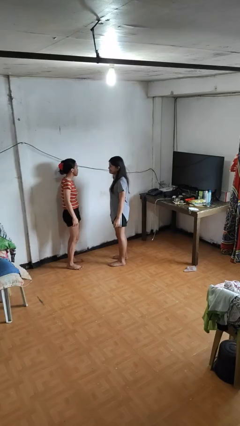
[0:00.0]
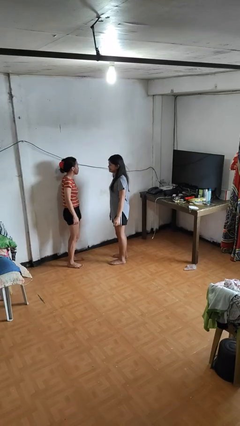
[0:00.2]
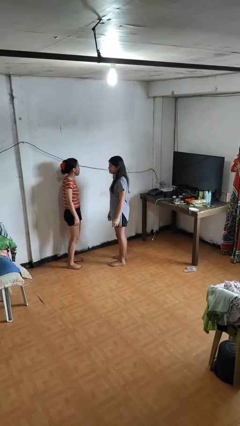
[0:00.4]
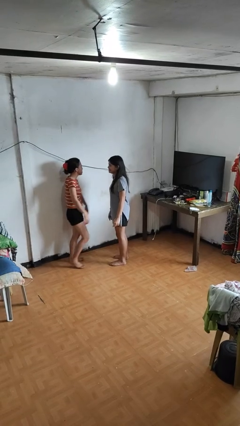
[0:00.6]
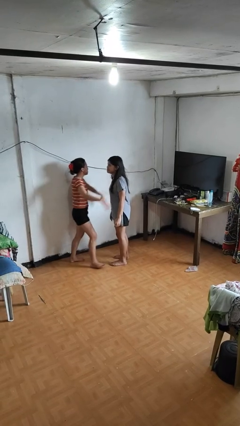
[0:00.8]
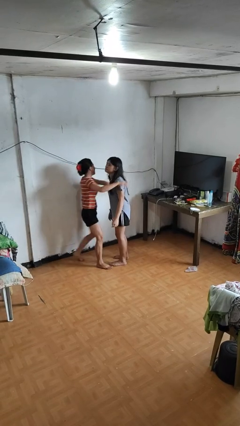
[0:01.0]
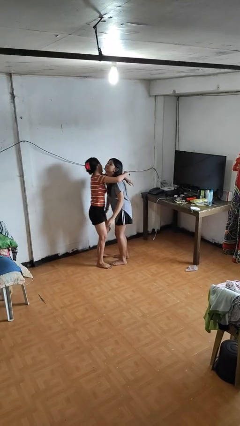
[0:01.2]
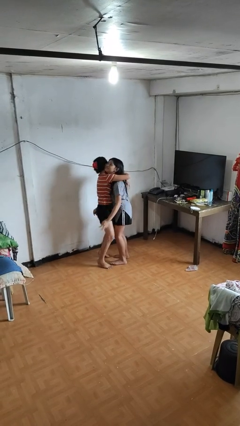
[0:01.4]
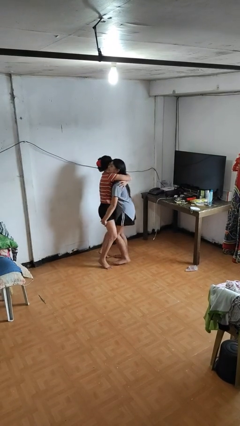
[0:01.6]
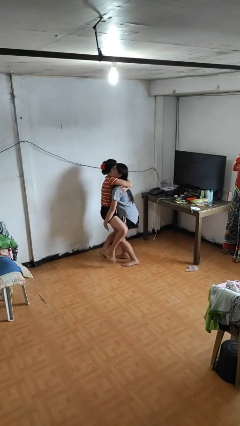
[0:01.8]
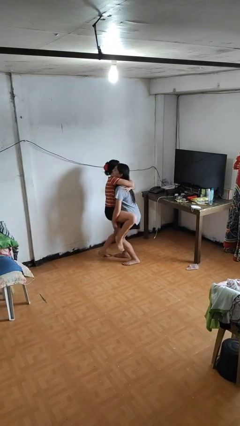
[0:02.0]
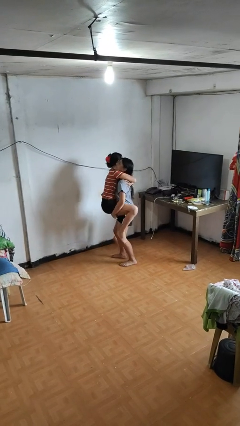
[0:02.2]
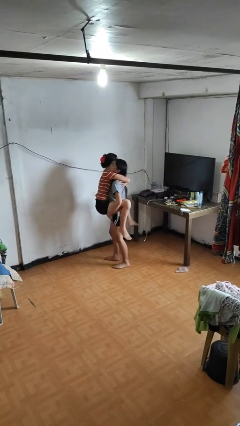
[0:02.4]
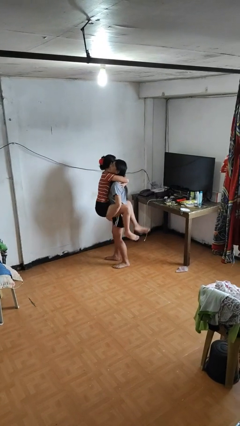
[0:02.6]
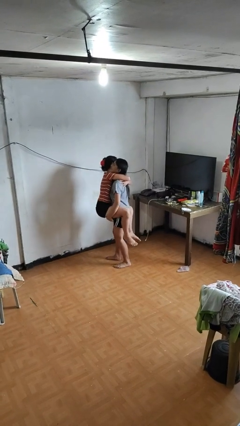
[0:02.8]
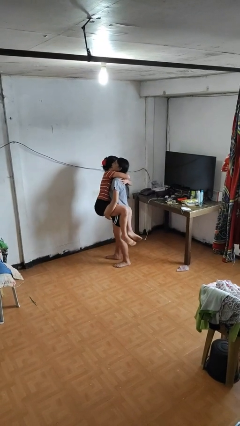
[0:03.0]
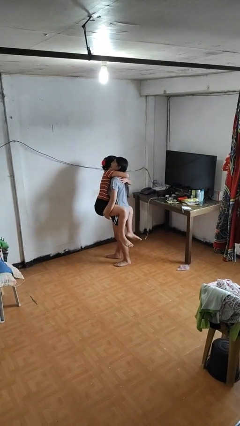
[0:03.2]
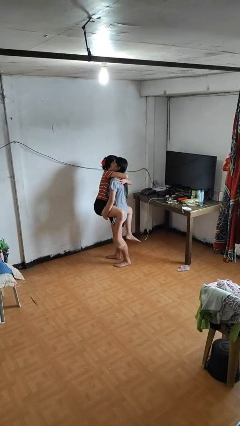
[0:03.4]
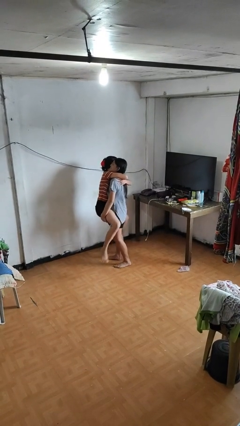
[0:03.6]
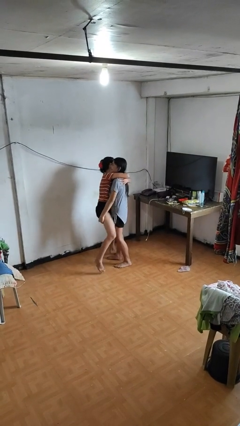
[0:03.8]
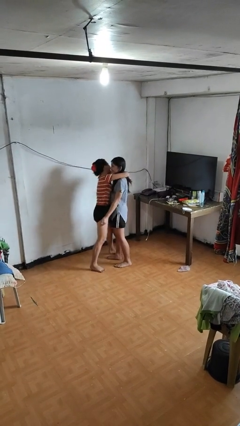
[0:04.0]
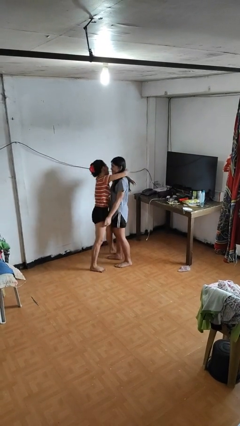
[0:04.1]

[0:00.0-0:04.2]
person picks up person

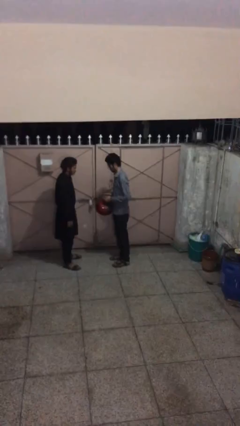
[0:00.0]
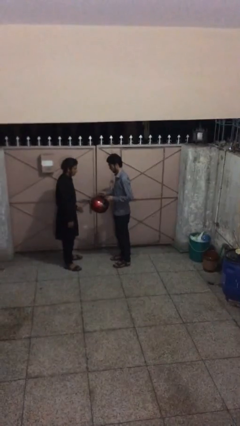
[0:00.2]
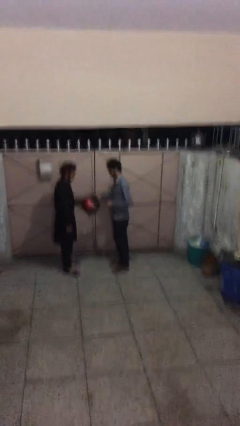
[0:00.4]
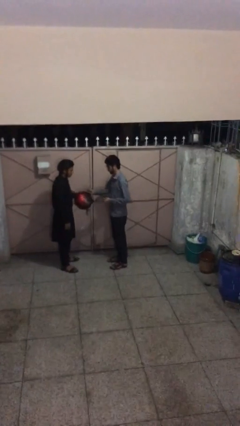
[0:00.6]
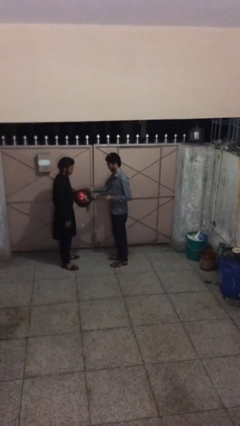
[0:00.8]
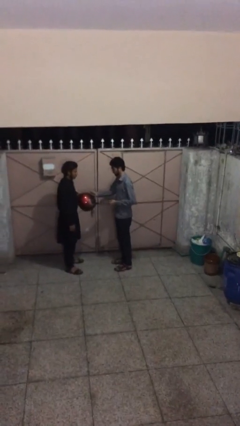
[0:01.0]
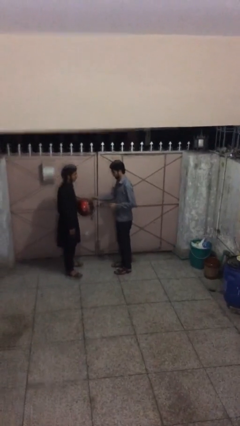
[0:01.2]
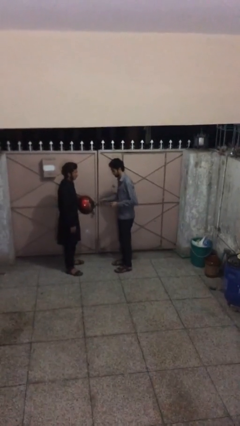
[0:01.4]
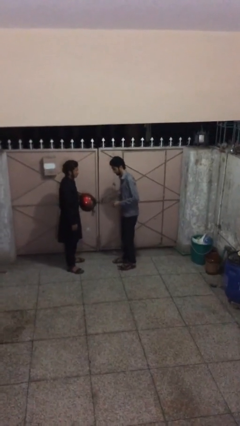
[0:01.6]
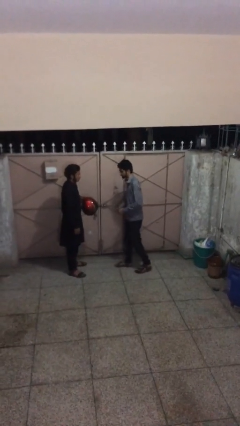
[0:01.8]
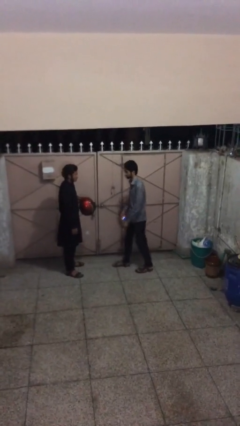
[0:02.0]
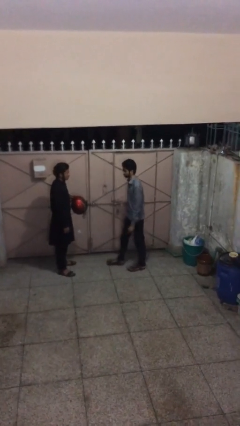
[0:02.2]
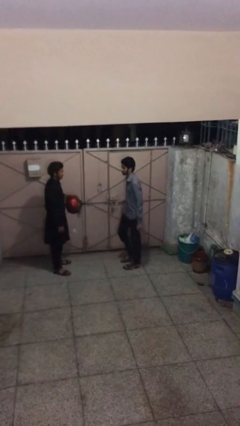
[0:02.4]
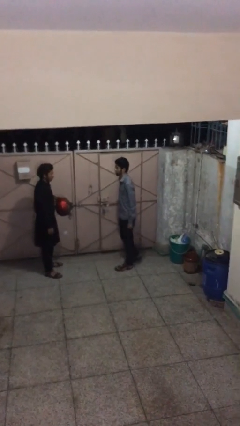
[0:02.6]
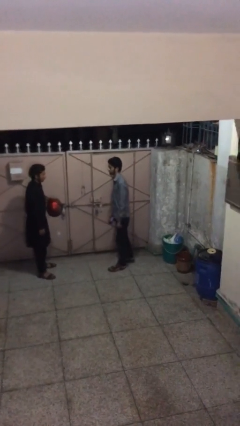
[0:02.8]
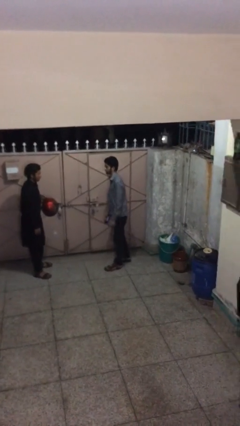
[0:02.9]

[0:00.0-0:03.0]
person transfers object to person

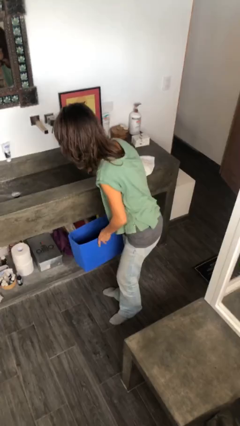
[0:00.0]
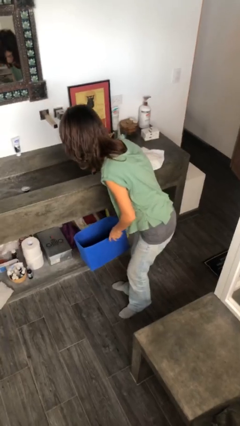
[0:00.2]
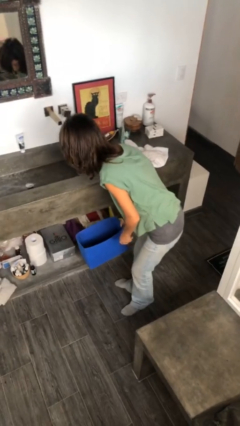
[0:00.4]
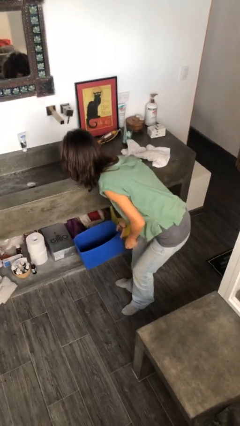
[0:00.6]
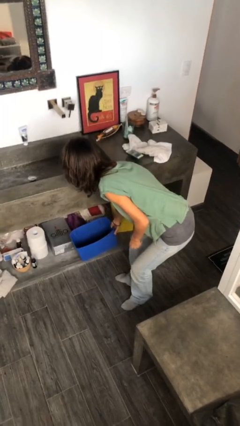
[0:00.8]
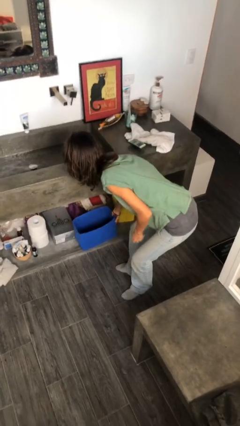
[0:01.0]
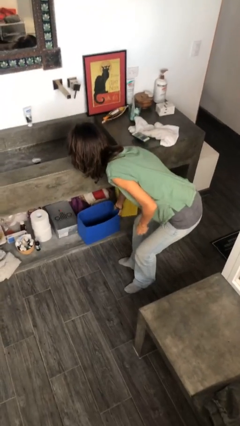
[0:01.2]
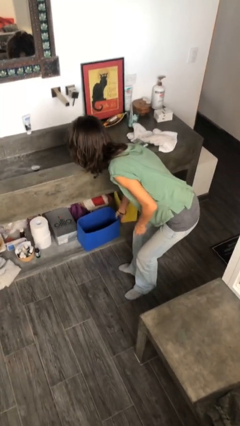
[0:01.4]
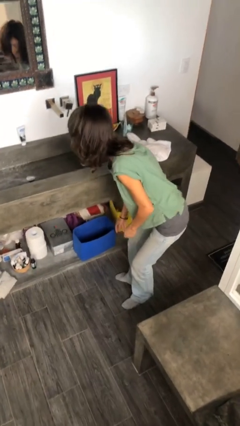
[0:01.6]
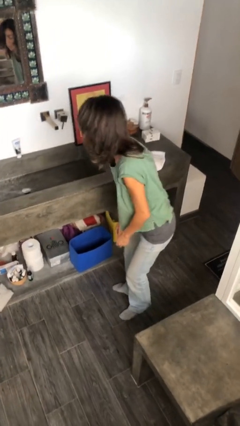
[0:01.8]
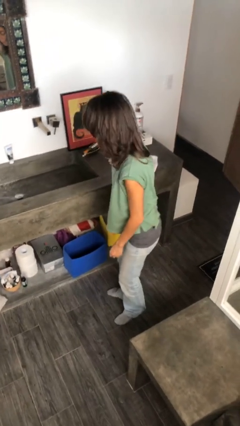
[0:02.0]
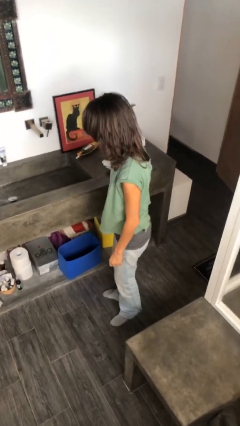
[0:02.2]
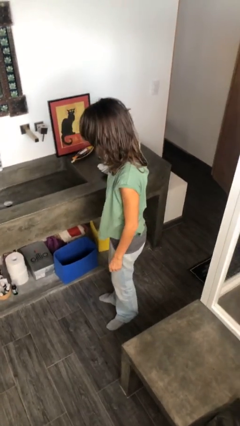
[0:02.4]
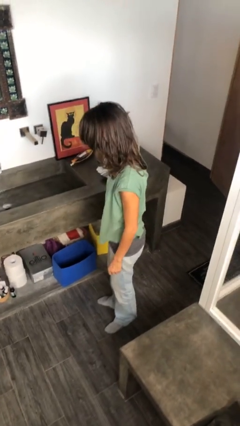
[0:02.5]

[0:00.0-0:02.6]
person puts down object into cabinet

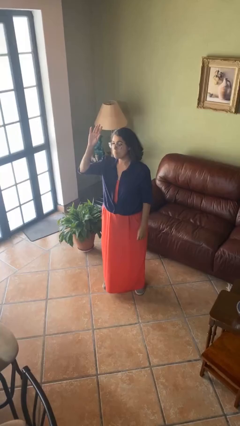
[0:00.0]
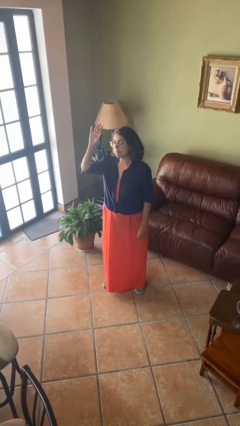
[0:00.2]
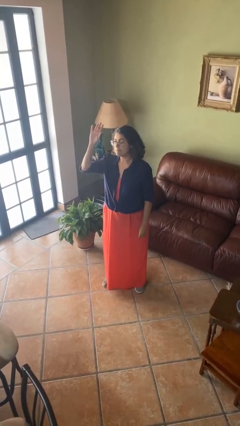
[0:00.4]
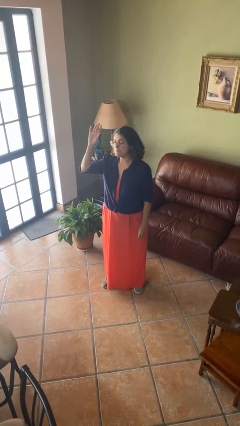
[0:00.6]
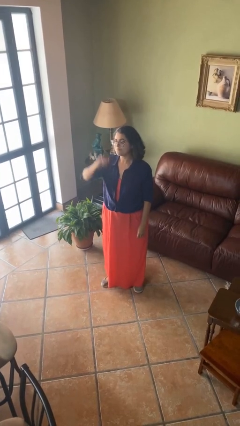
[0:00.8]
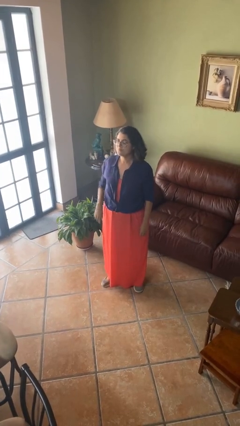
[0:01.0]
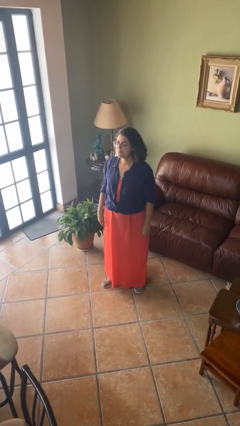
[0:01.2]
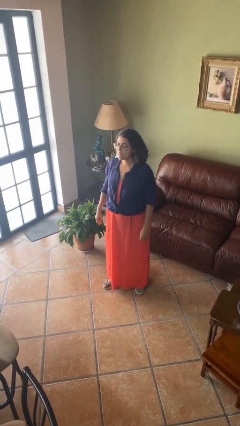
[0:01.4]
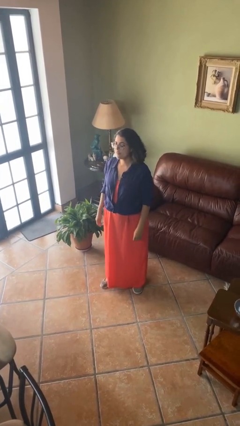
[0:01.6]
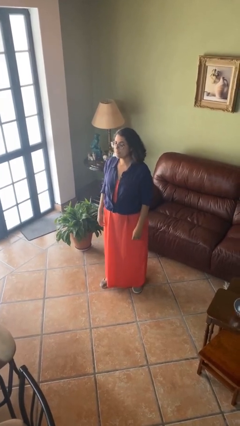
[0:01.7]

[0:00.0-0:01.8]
person gestures lower hand

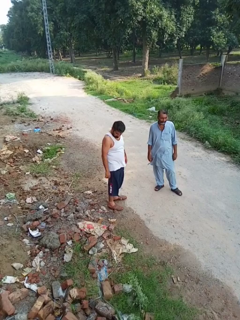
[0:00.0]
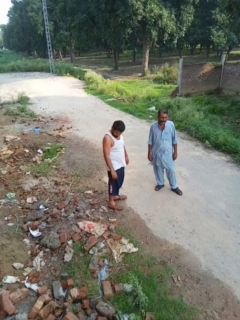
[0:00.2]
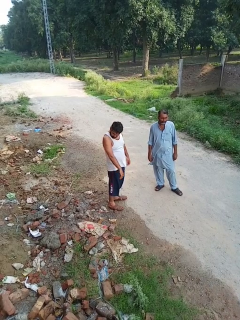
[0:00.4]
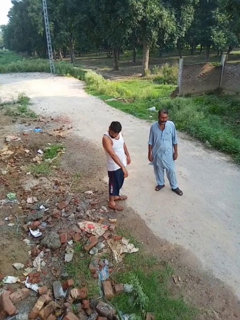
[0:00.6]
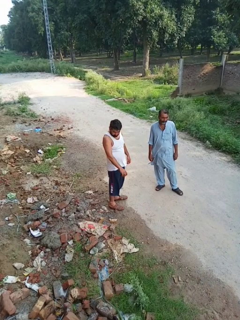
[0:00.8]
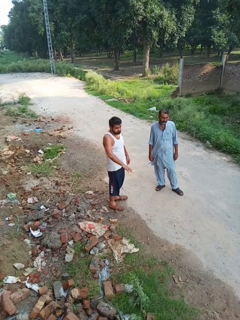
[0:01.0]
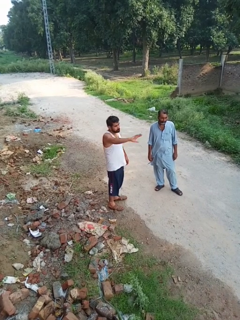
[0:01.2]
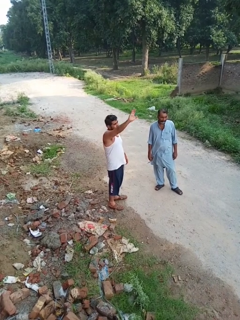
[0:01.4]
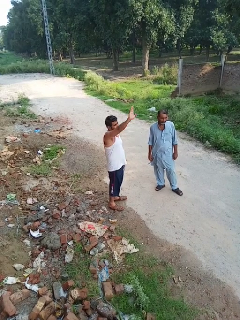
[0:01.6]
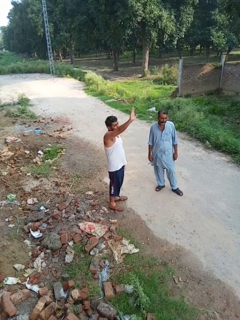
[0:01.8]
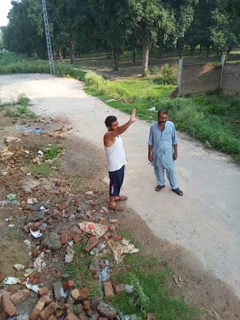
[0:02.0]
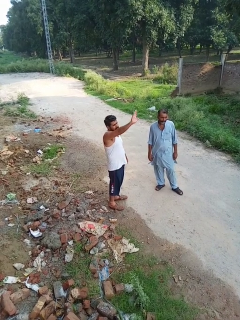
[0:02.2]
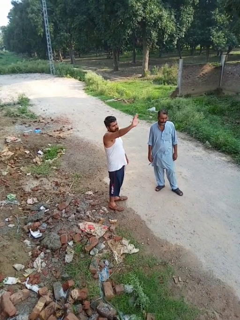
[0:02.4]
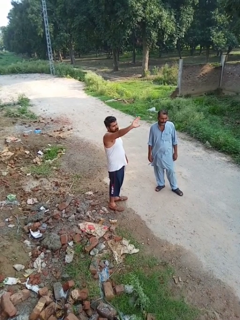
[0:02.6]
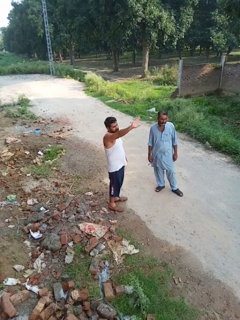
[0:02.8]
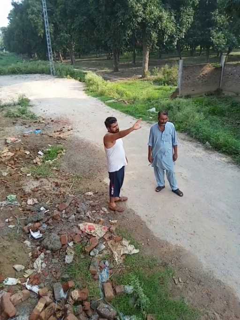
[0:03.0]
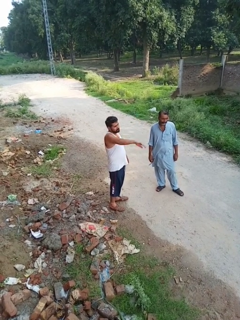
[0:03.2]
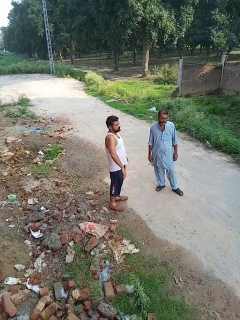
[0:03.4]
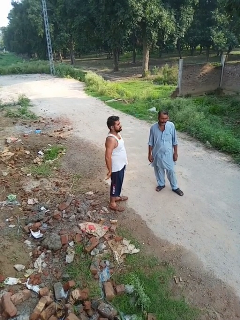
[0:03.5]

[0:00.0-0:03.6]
person waves at person

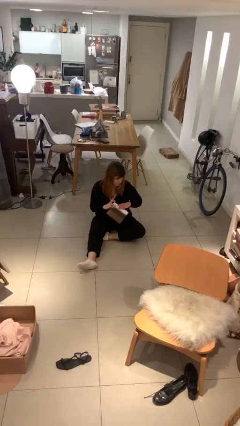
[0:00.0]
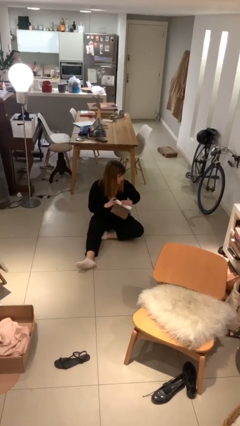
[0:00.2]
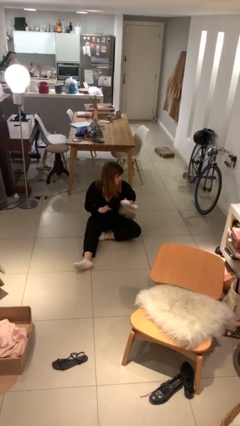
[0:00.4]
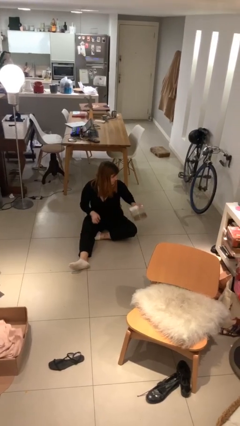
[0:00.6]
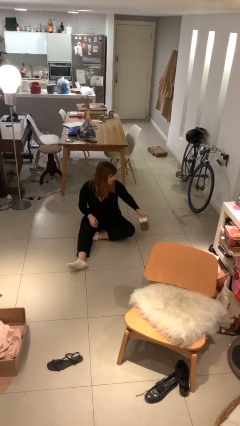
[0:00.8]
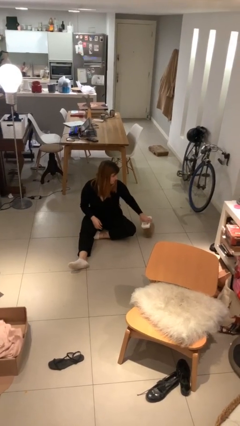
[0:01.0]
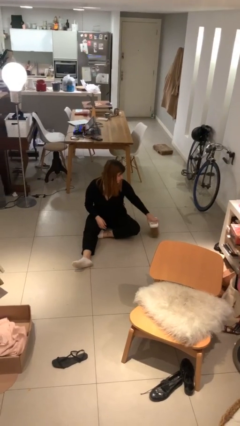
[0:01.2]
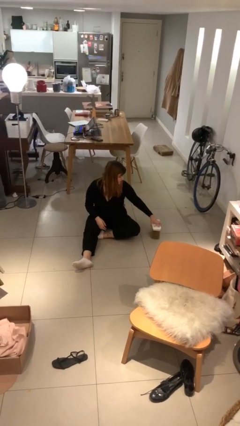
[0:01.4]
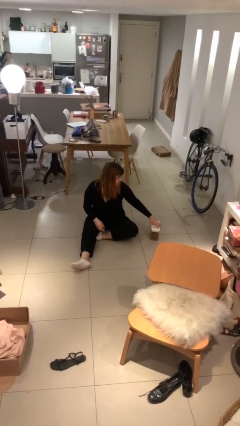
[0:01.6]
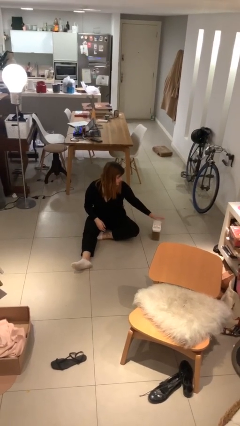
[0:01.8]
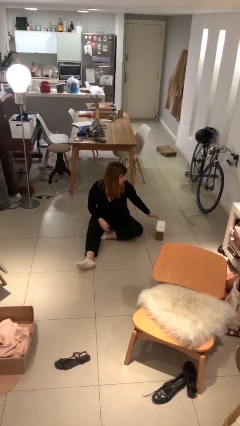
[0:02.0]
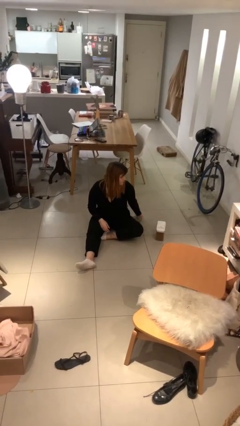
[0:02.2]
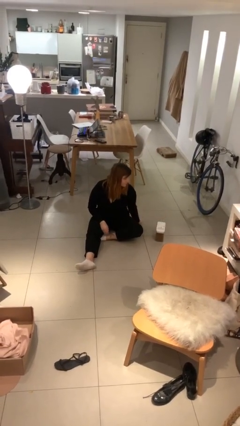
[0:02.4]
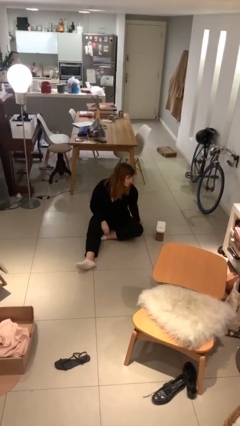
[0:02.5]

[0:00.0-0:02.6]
person puts down object on floor
